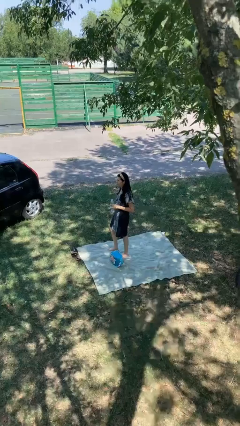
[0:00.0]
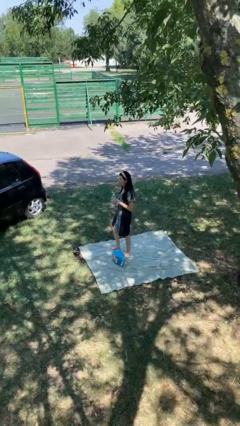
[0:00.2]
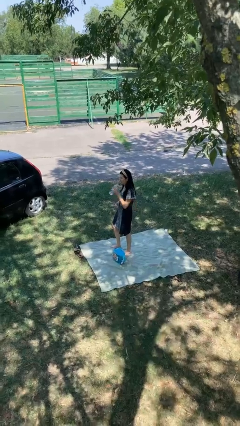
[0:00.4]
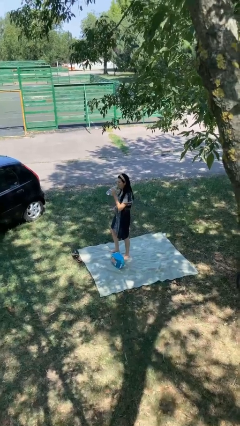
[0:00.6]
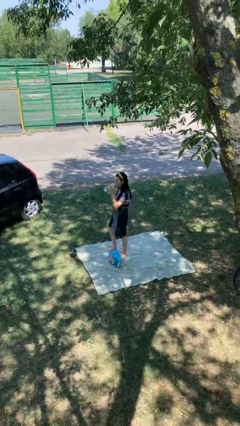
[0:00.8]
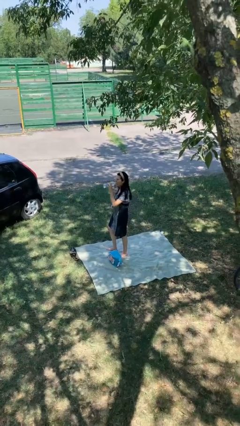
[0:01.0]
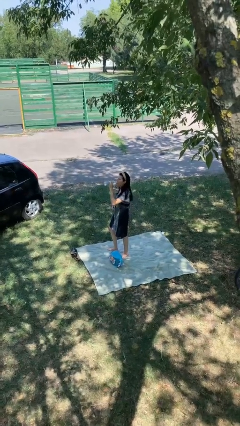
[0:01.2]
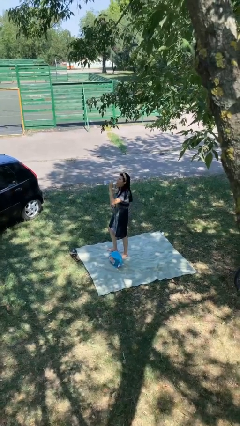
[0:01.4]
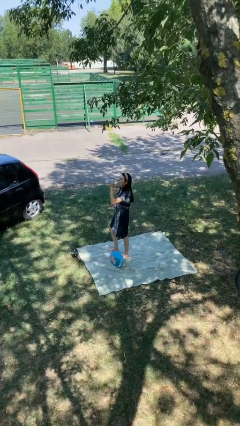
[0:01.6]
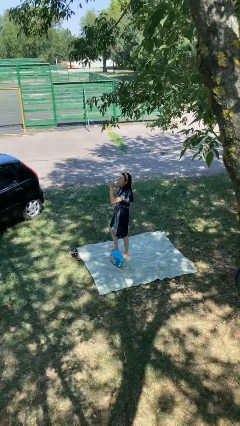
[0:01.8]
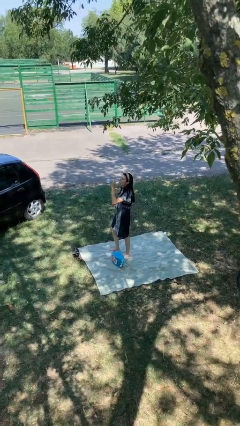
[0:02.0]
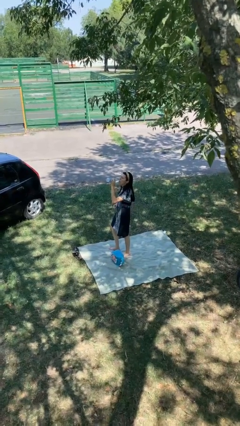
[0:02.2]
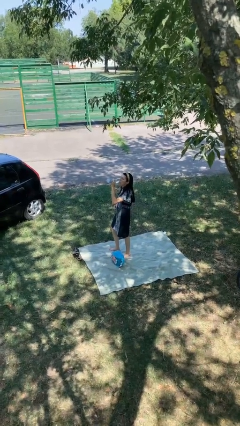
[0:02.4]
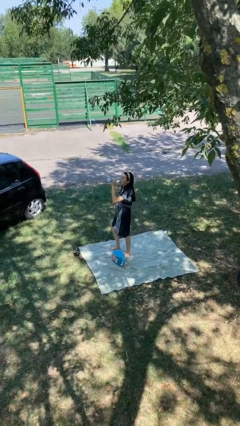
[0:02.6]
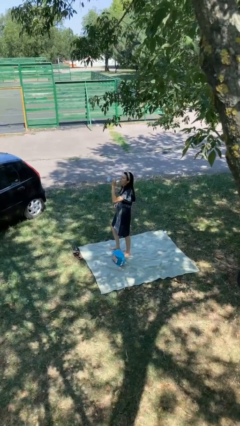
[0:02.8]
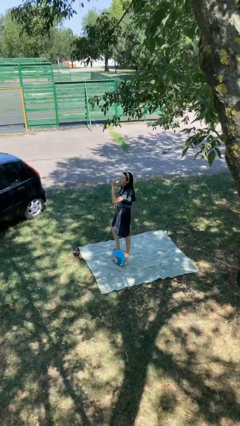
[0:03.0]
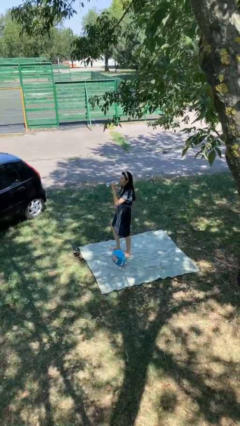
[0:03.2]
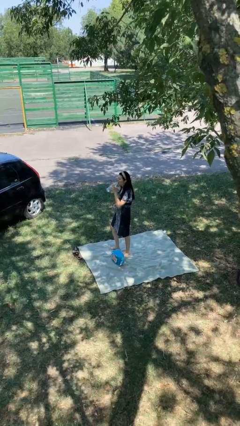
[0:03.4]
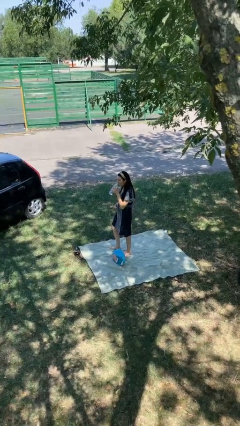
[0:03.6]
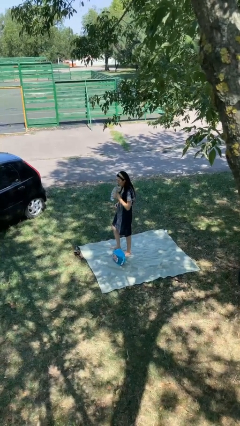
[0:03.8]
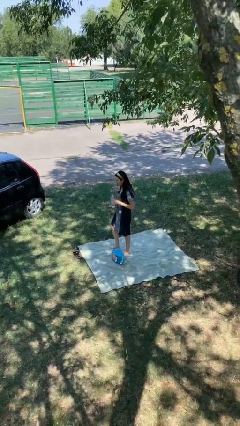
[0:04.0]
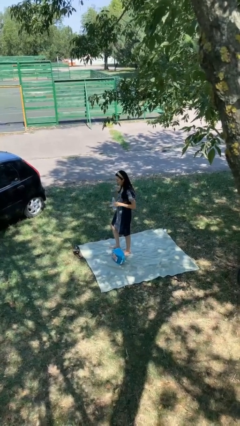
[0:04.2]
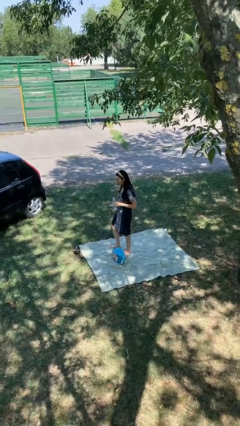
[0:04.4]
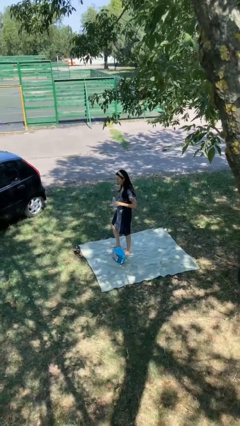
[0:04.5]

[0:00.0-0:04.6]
person drinks from bottle

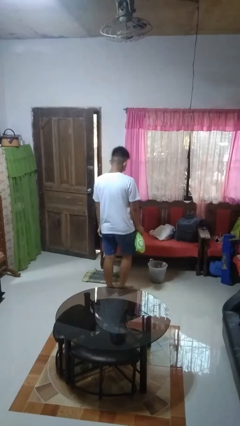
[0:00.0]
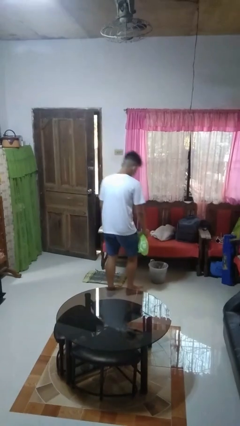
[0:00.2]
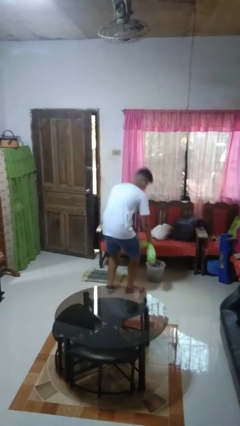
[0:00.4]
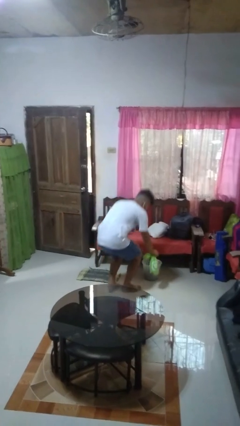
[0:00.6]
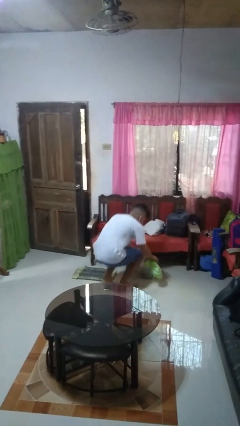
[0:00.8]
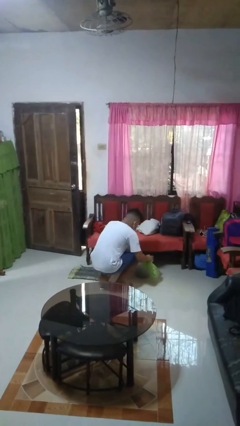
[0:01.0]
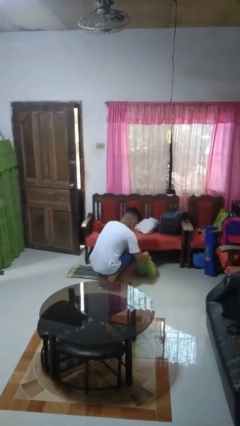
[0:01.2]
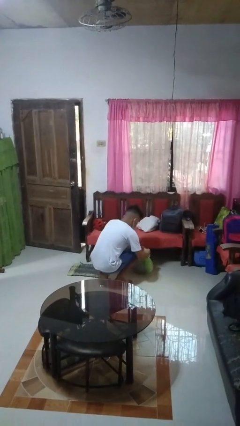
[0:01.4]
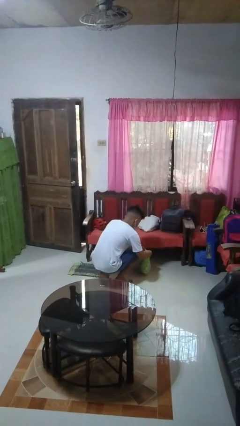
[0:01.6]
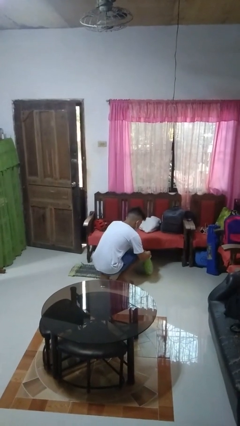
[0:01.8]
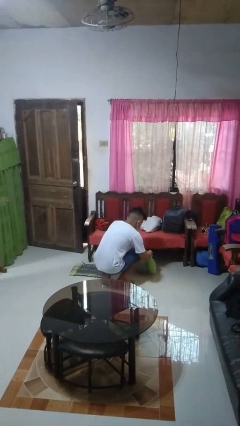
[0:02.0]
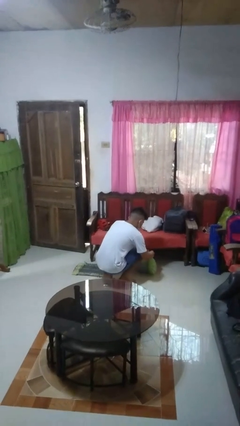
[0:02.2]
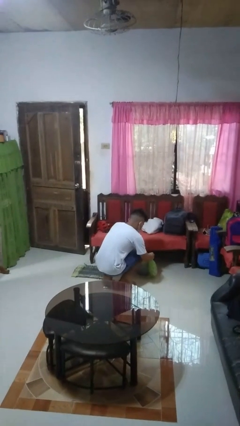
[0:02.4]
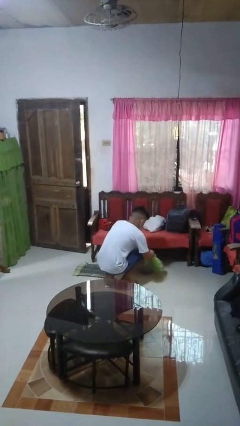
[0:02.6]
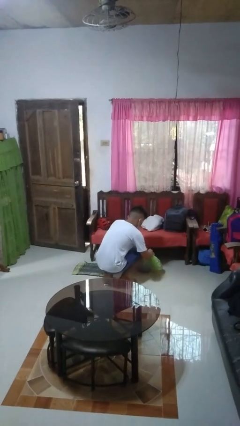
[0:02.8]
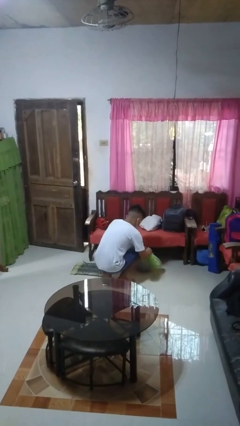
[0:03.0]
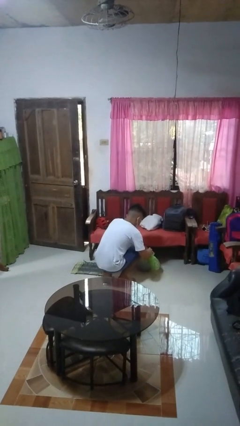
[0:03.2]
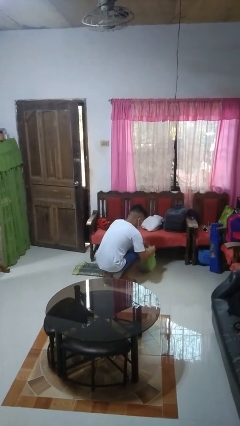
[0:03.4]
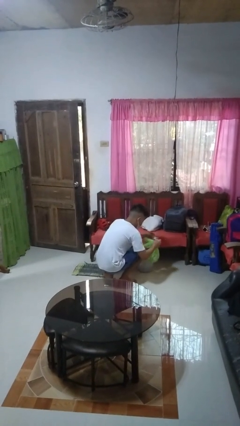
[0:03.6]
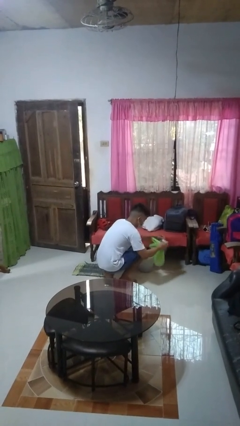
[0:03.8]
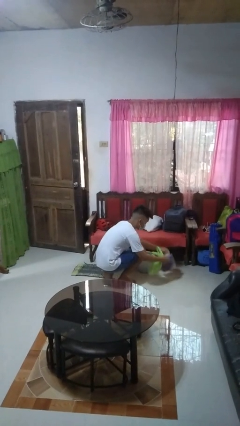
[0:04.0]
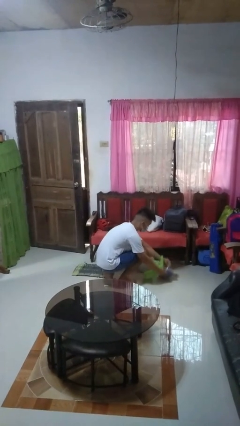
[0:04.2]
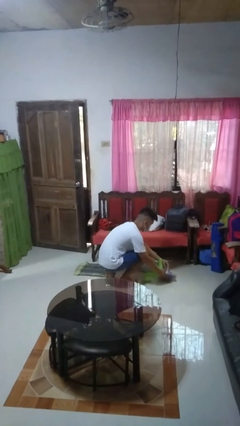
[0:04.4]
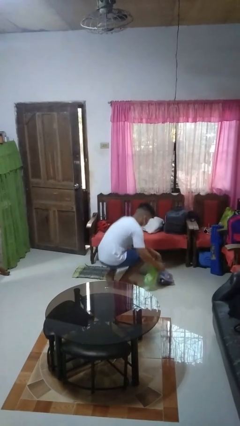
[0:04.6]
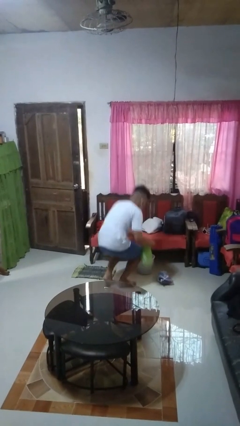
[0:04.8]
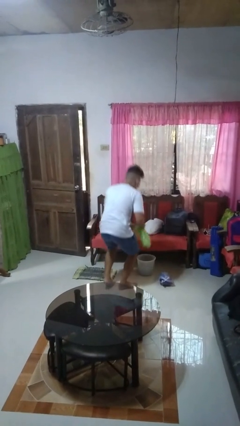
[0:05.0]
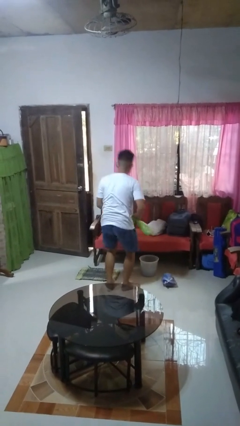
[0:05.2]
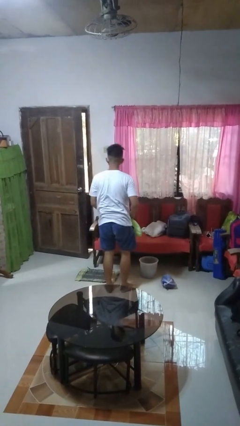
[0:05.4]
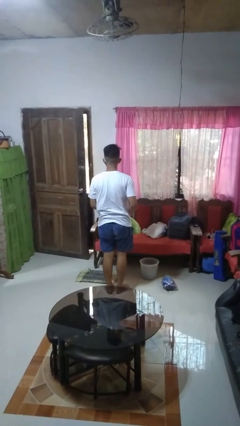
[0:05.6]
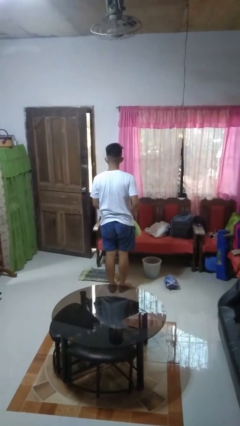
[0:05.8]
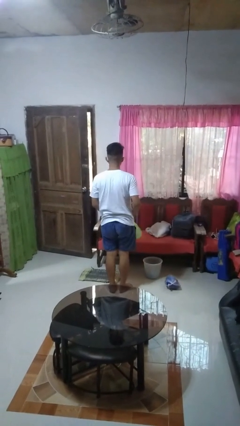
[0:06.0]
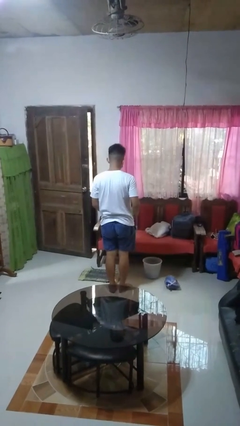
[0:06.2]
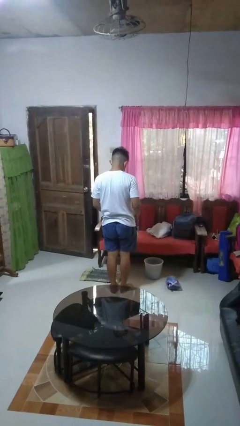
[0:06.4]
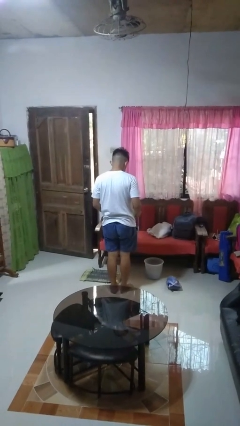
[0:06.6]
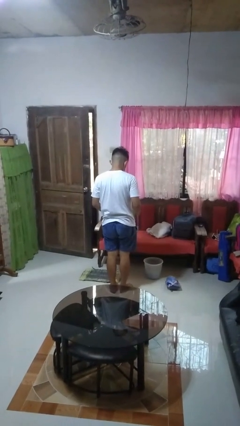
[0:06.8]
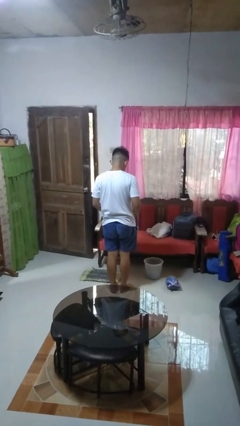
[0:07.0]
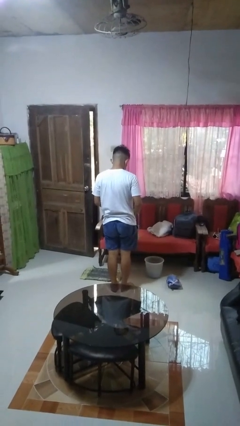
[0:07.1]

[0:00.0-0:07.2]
person removes trashbag from trashcan

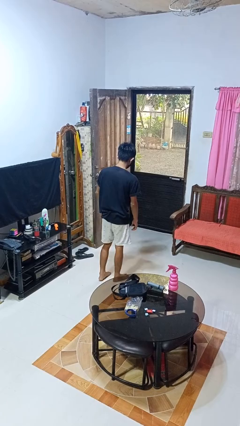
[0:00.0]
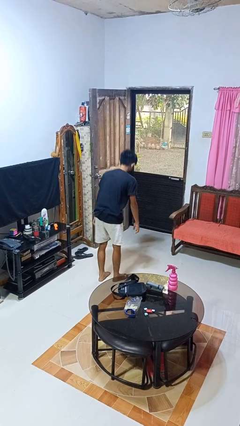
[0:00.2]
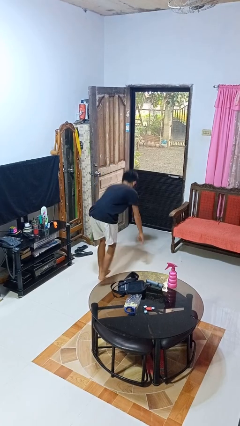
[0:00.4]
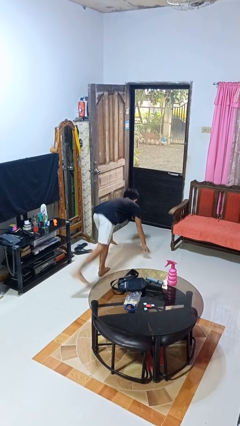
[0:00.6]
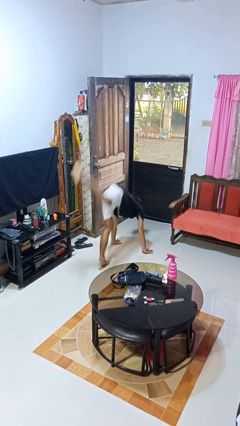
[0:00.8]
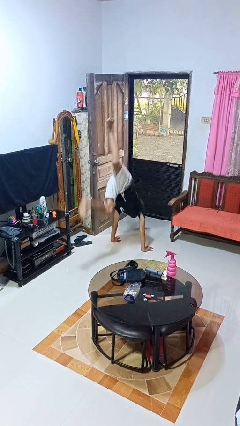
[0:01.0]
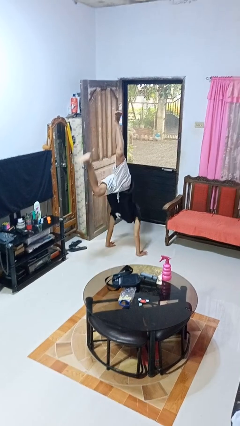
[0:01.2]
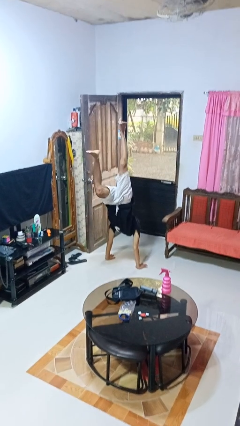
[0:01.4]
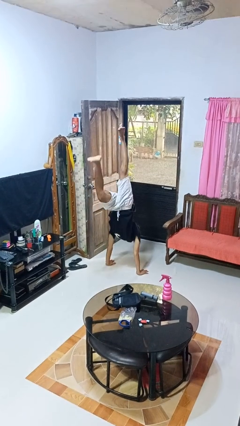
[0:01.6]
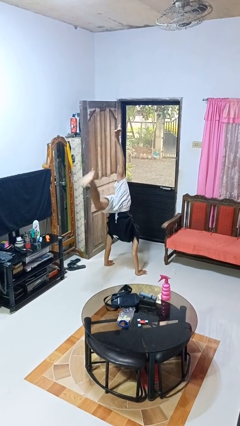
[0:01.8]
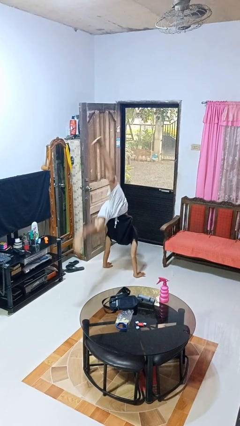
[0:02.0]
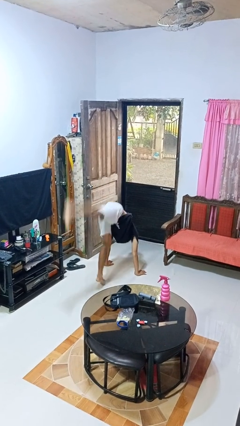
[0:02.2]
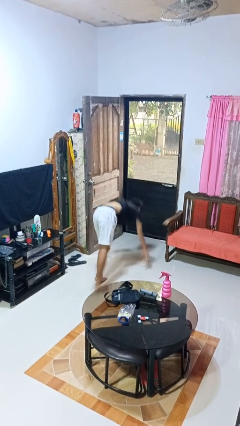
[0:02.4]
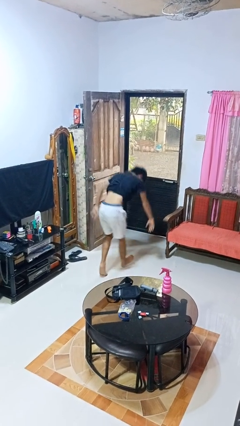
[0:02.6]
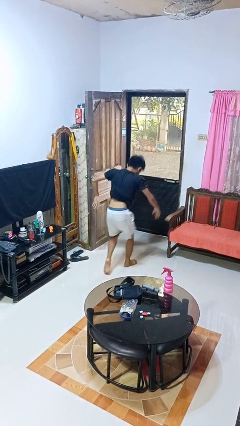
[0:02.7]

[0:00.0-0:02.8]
person handstand

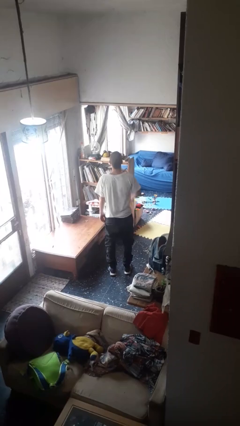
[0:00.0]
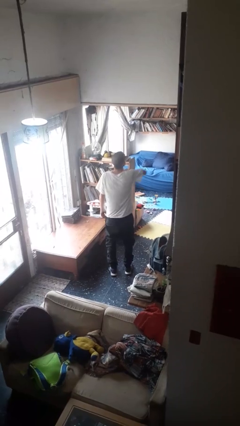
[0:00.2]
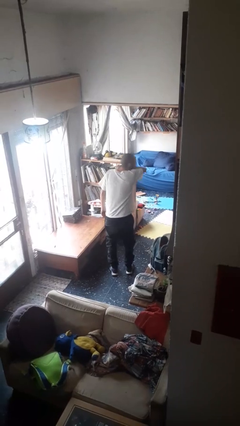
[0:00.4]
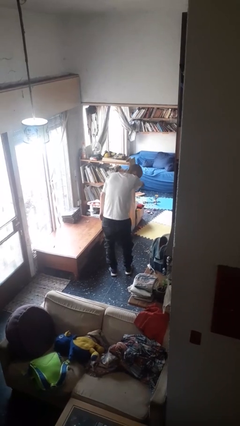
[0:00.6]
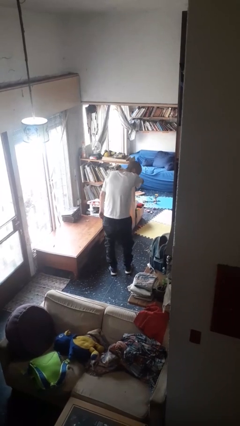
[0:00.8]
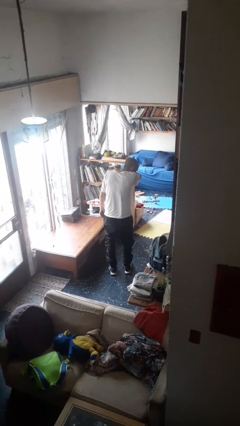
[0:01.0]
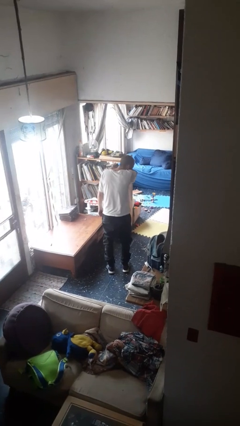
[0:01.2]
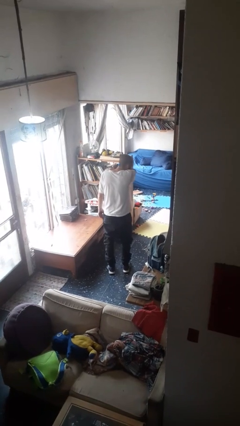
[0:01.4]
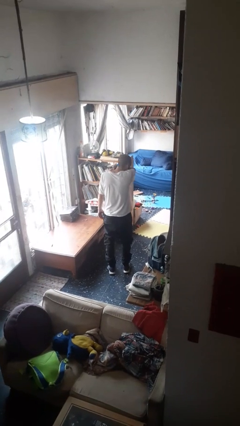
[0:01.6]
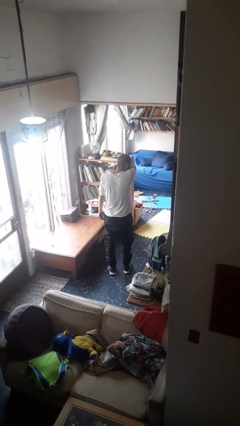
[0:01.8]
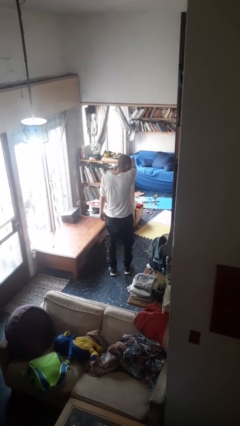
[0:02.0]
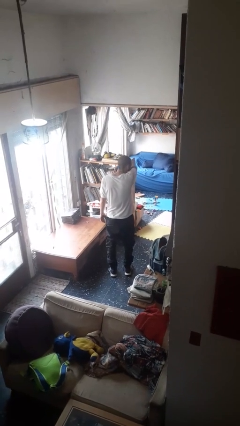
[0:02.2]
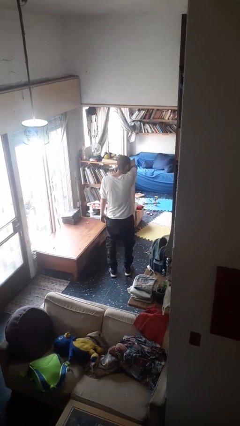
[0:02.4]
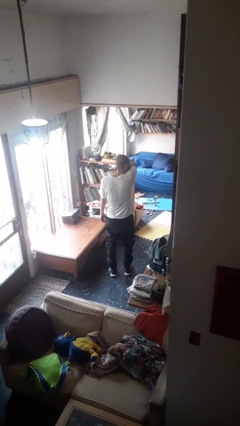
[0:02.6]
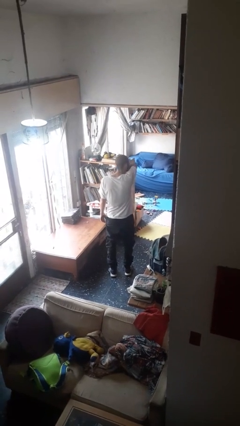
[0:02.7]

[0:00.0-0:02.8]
person sneezes into arm
